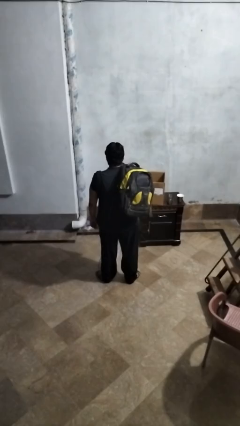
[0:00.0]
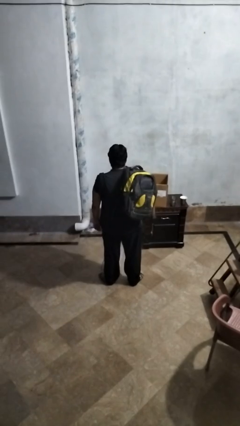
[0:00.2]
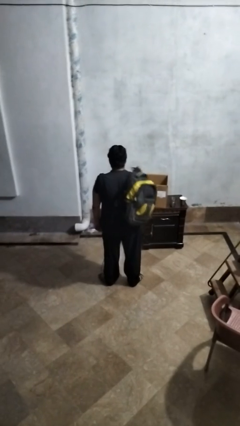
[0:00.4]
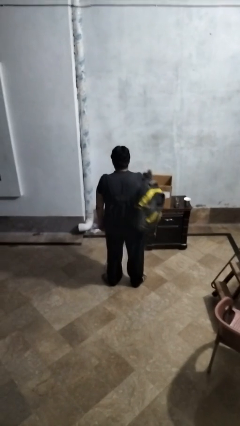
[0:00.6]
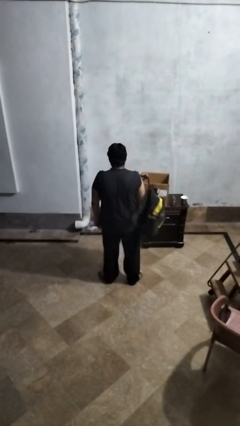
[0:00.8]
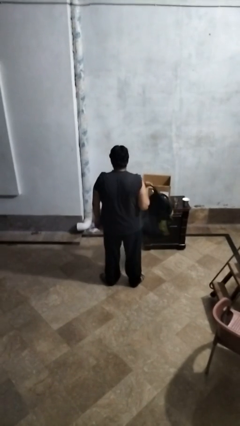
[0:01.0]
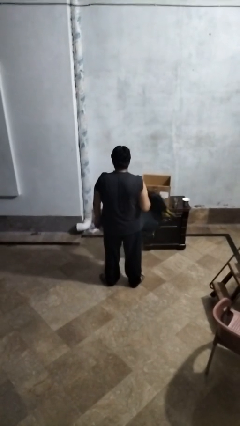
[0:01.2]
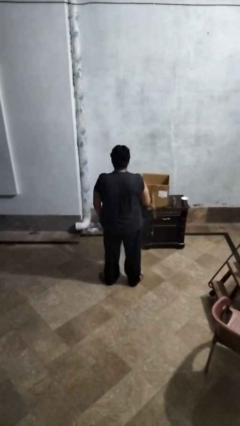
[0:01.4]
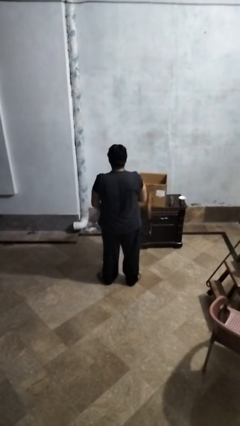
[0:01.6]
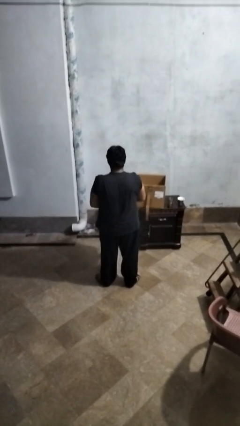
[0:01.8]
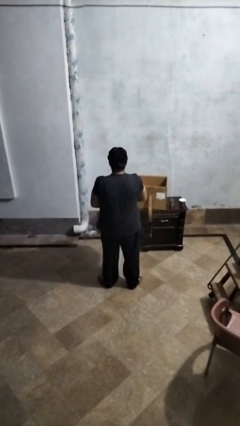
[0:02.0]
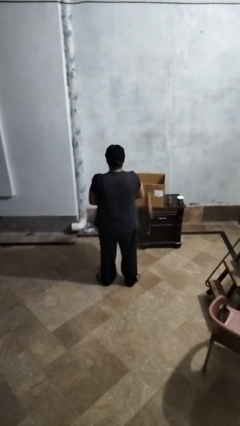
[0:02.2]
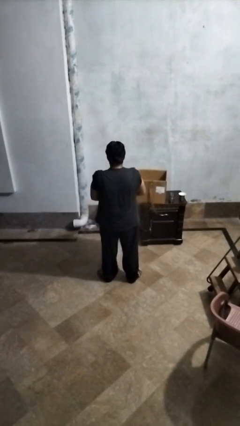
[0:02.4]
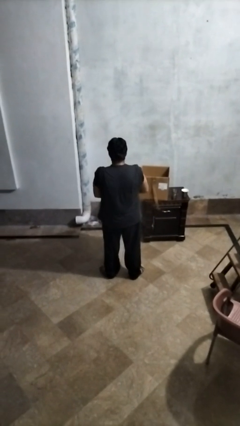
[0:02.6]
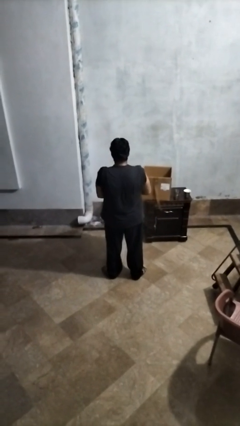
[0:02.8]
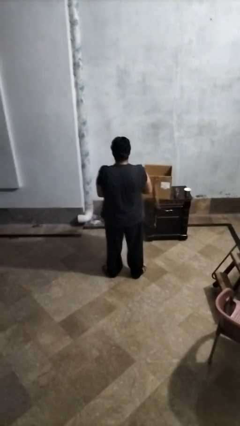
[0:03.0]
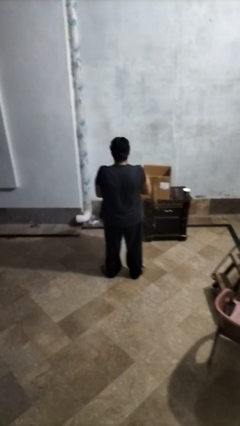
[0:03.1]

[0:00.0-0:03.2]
person takes off backpack

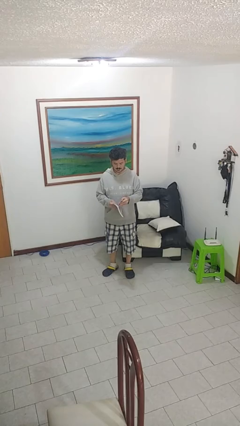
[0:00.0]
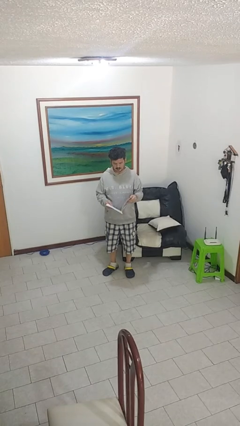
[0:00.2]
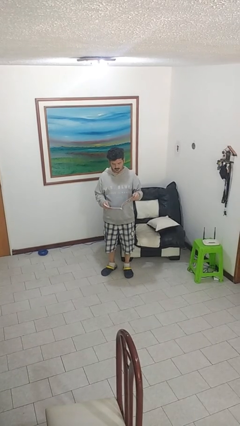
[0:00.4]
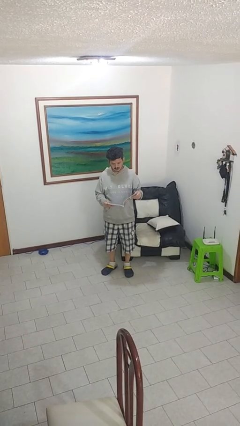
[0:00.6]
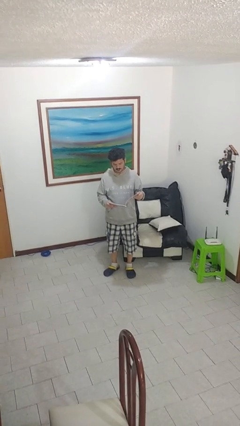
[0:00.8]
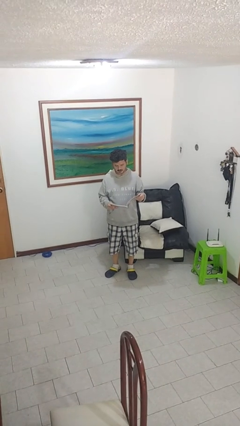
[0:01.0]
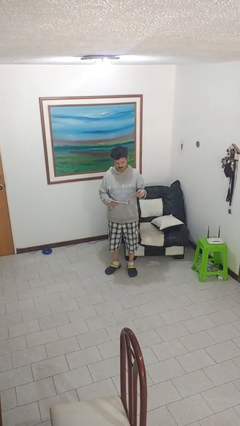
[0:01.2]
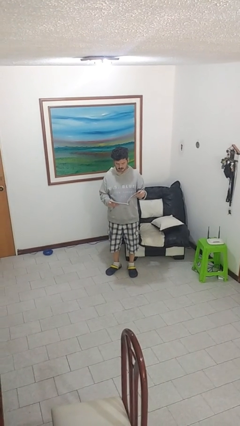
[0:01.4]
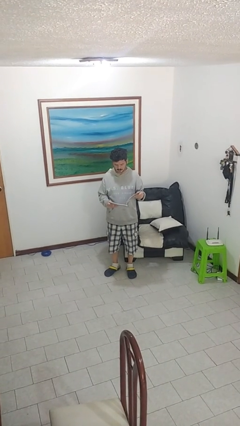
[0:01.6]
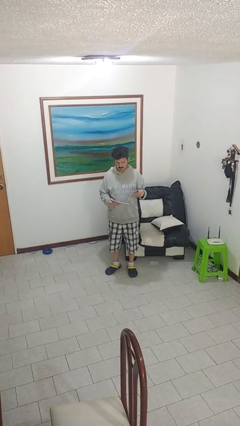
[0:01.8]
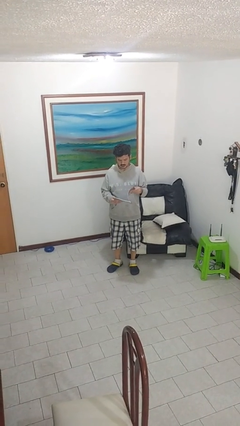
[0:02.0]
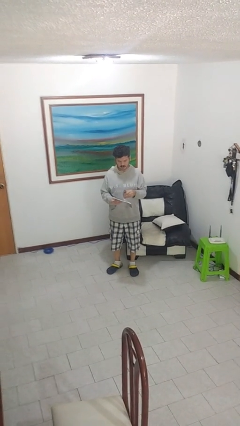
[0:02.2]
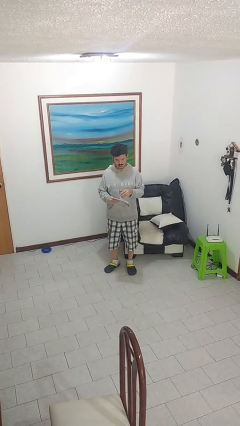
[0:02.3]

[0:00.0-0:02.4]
person reads magazine

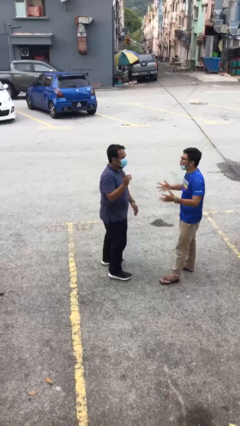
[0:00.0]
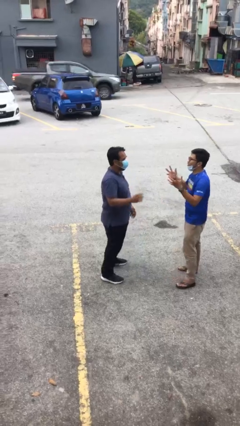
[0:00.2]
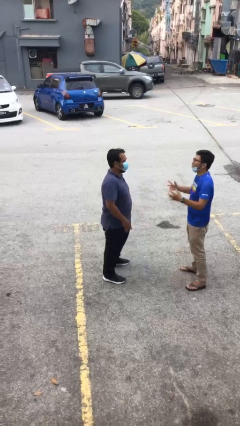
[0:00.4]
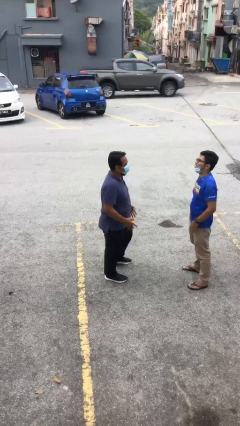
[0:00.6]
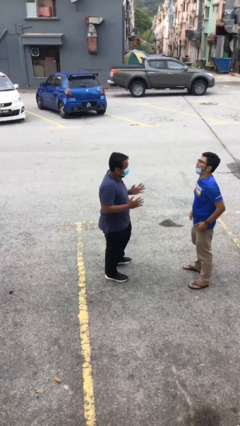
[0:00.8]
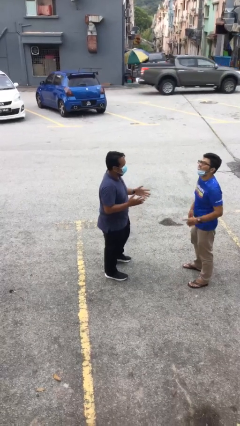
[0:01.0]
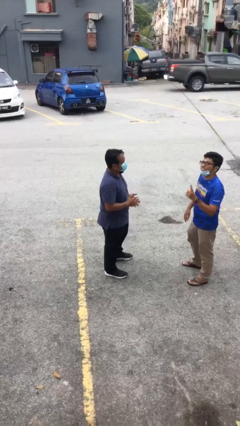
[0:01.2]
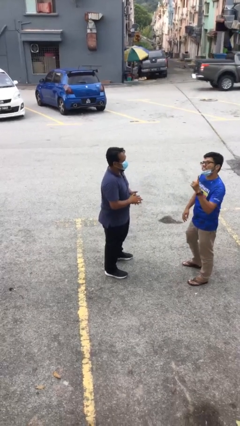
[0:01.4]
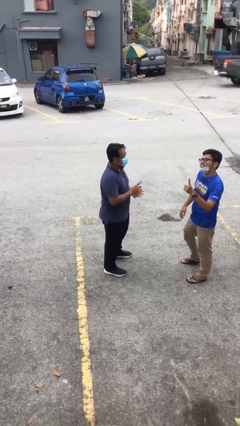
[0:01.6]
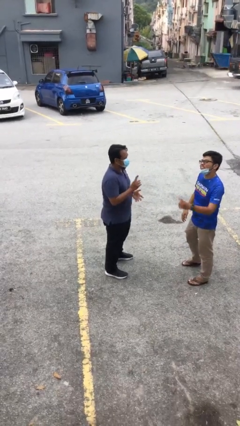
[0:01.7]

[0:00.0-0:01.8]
person talks to person

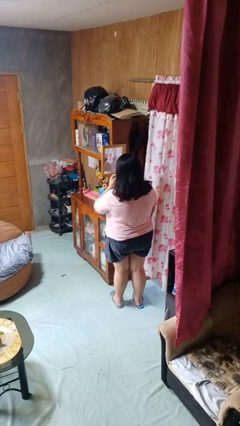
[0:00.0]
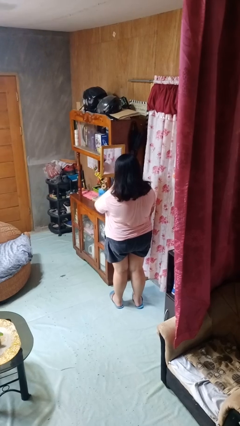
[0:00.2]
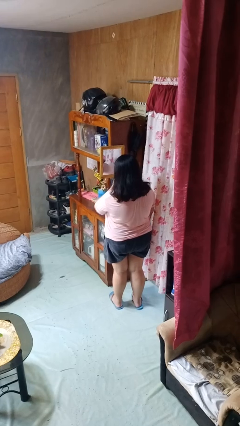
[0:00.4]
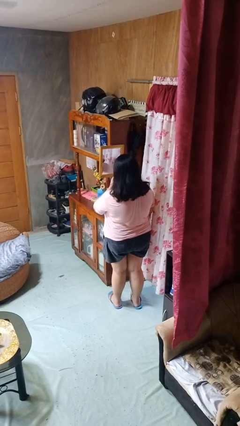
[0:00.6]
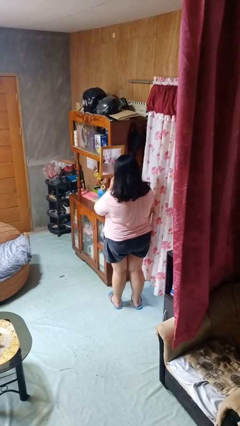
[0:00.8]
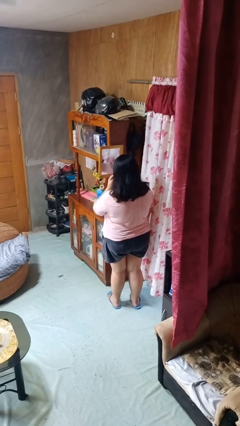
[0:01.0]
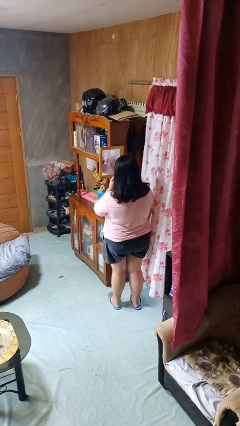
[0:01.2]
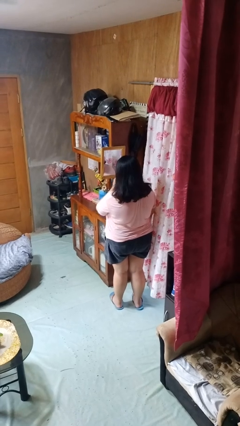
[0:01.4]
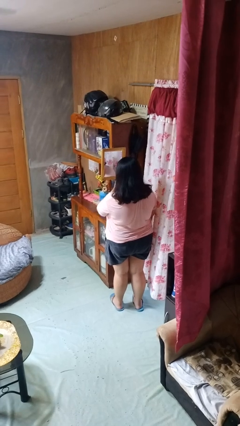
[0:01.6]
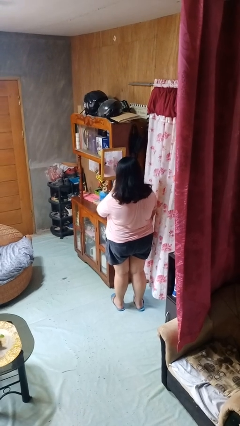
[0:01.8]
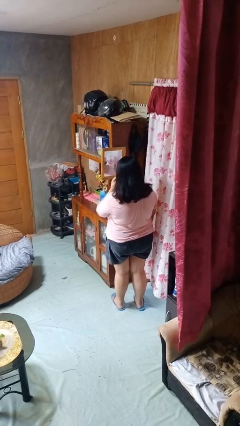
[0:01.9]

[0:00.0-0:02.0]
person applies lip makeup

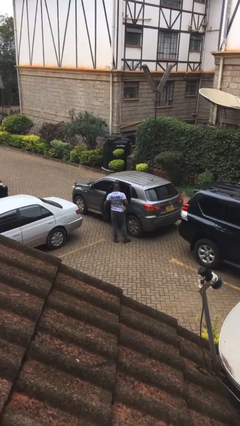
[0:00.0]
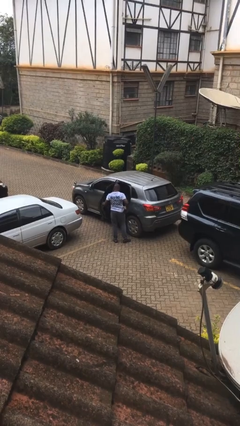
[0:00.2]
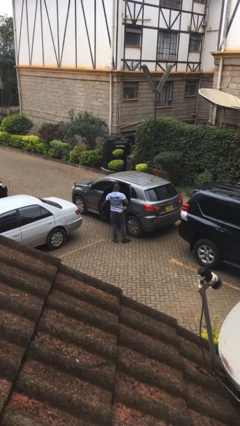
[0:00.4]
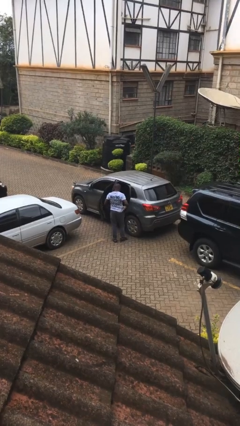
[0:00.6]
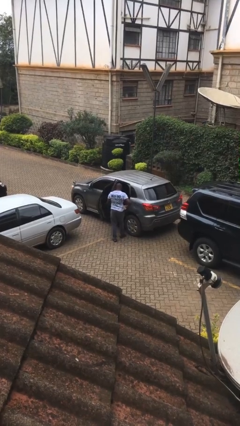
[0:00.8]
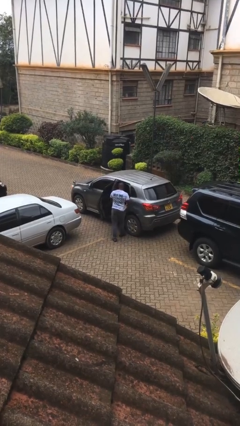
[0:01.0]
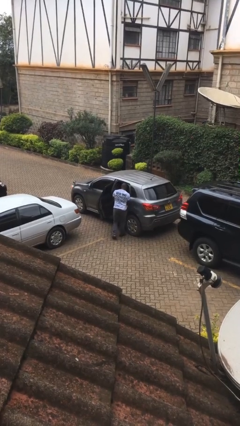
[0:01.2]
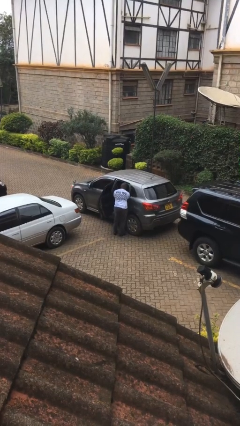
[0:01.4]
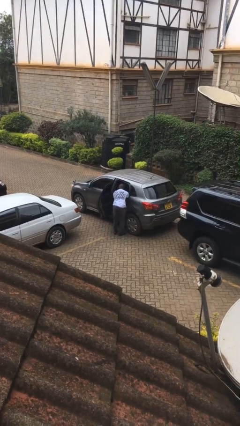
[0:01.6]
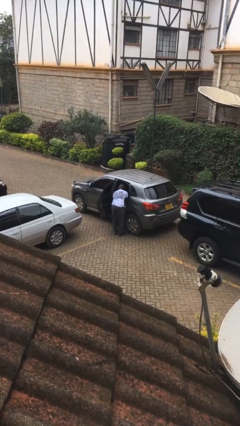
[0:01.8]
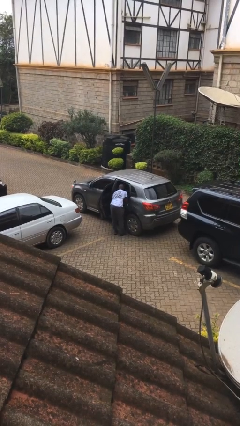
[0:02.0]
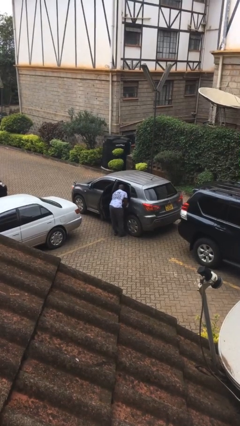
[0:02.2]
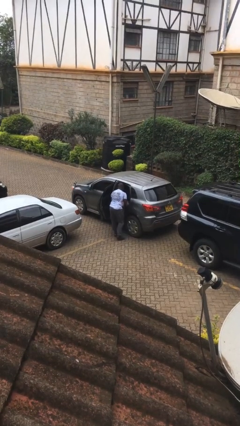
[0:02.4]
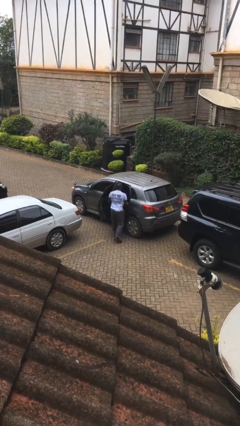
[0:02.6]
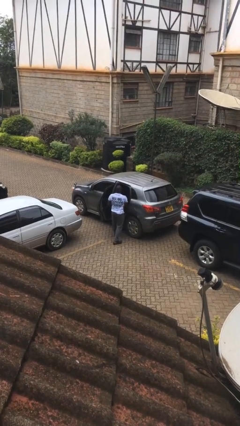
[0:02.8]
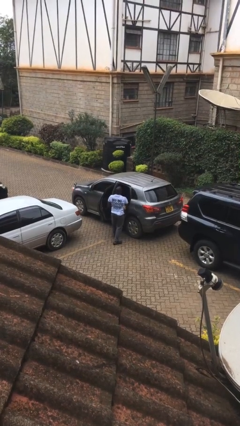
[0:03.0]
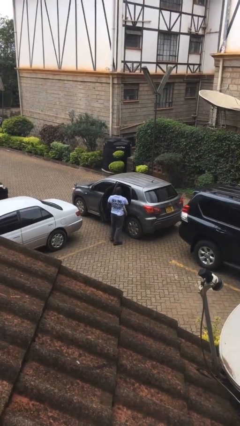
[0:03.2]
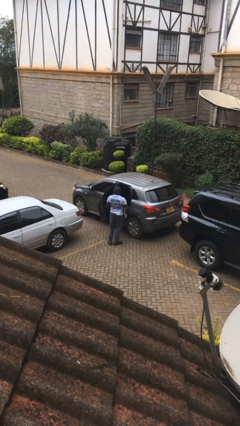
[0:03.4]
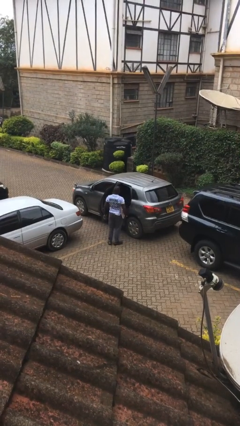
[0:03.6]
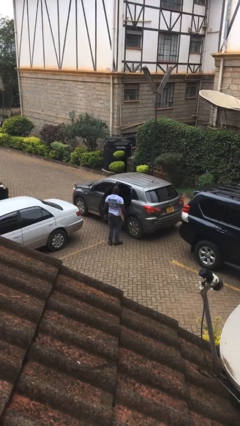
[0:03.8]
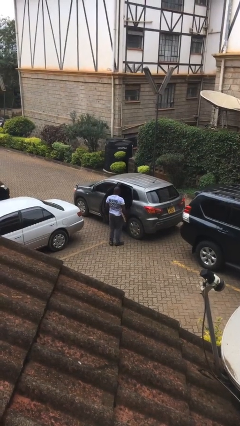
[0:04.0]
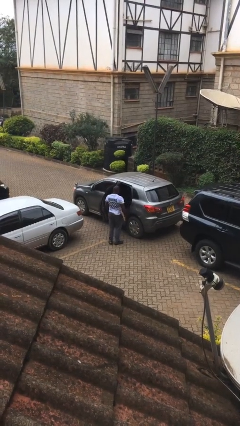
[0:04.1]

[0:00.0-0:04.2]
person unloads car

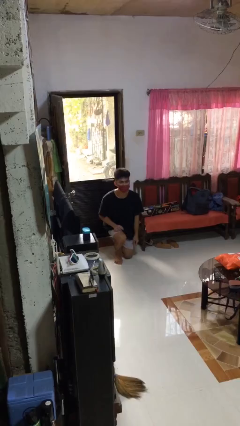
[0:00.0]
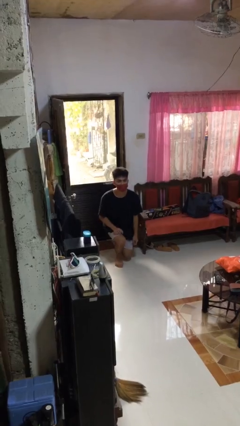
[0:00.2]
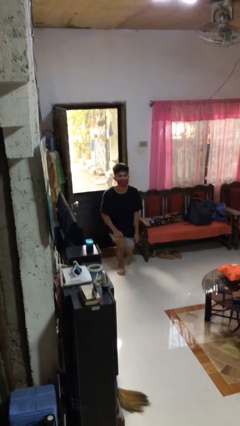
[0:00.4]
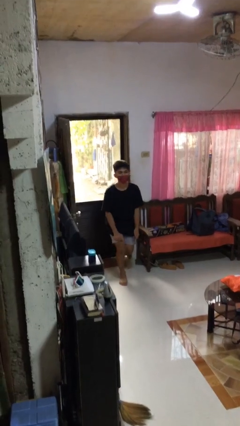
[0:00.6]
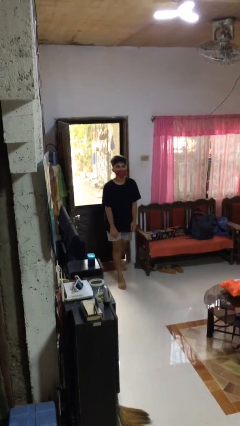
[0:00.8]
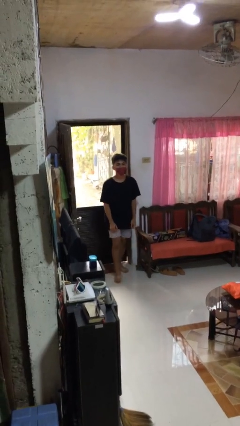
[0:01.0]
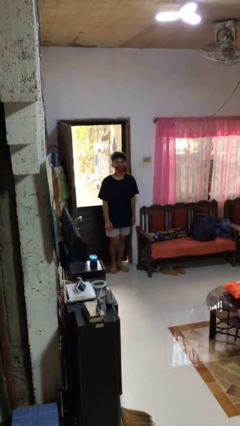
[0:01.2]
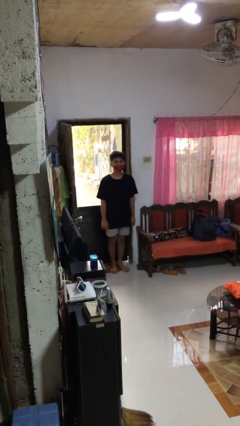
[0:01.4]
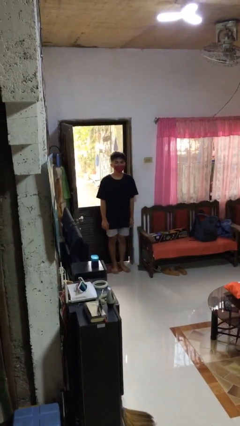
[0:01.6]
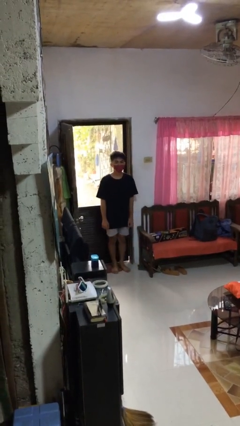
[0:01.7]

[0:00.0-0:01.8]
person stands up from floor

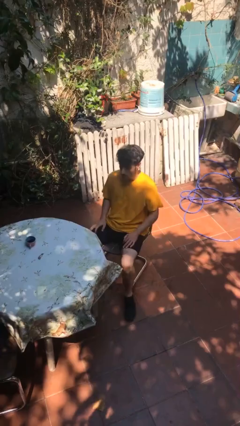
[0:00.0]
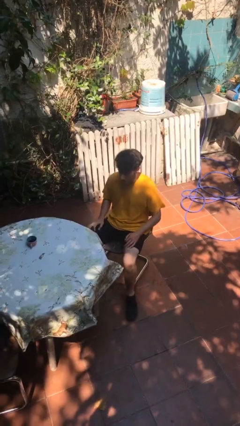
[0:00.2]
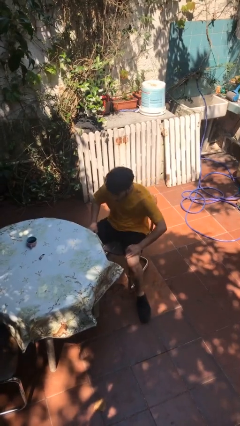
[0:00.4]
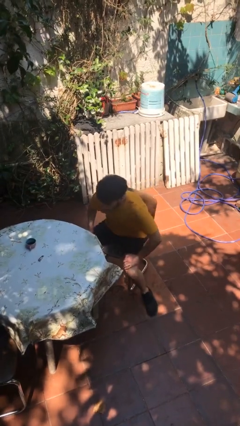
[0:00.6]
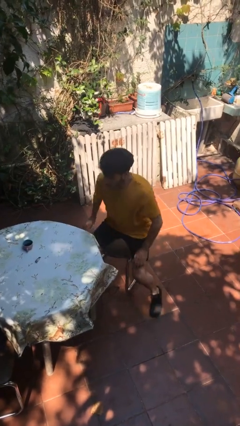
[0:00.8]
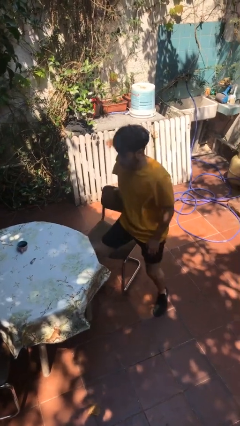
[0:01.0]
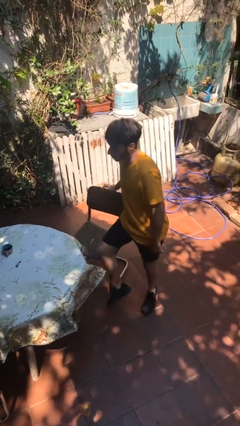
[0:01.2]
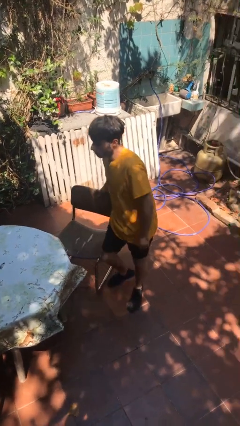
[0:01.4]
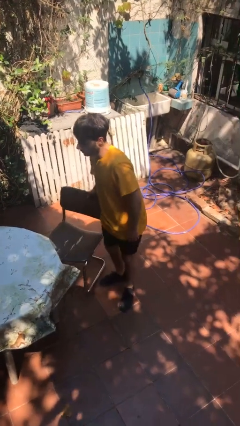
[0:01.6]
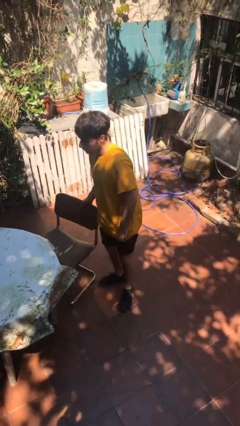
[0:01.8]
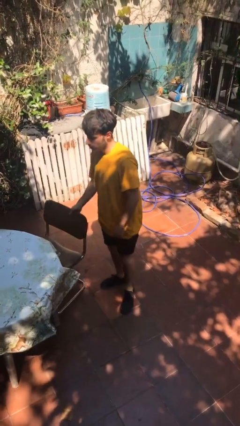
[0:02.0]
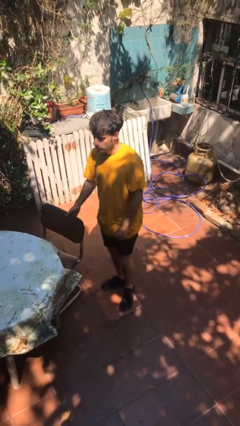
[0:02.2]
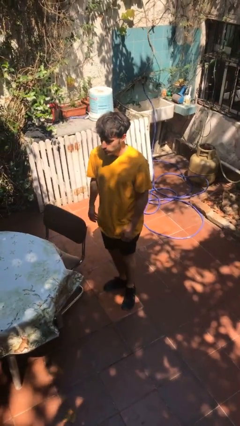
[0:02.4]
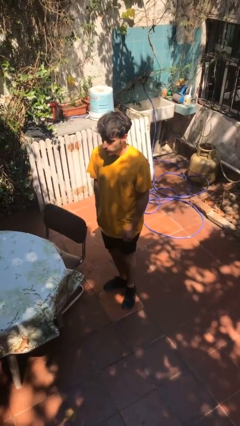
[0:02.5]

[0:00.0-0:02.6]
person stands up
